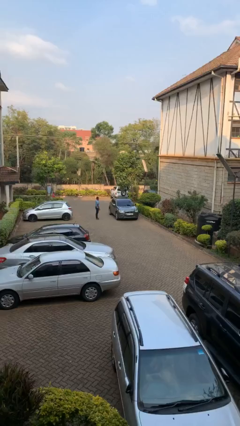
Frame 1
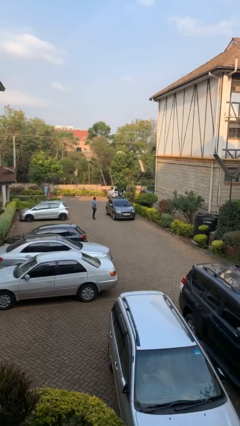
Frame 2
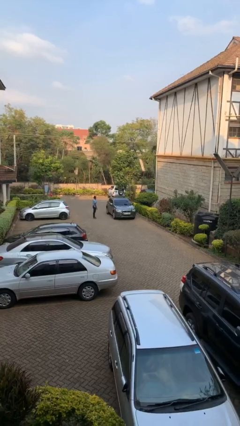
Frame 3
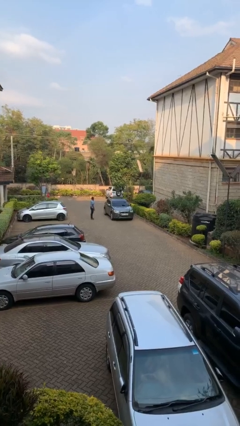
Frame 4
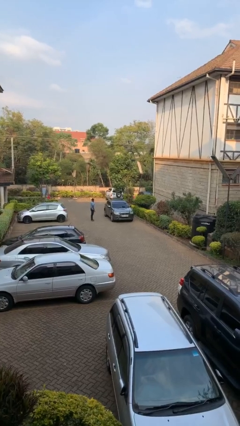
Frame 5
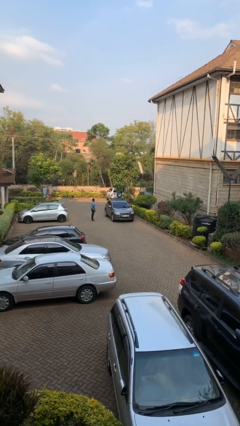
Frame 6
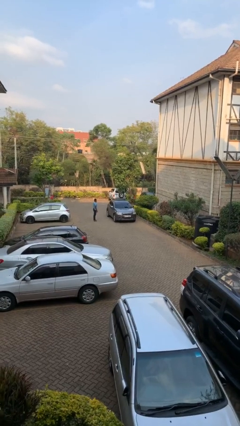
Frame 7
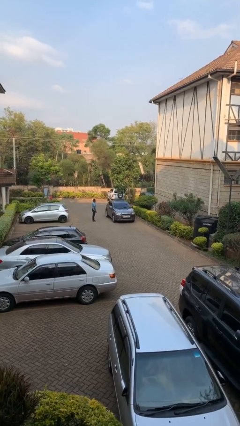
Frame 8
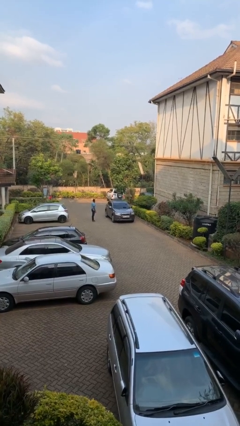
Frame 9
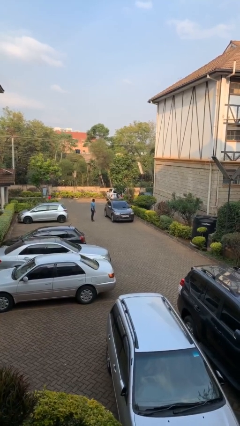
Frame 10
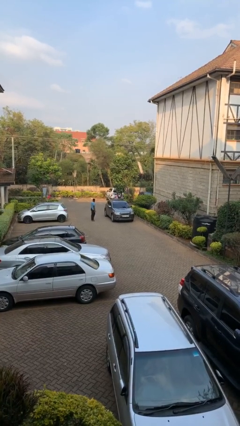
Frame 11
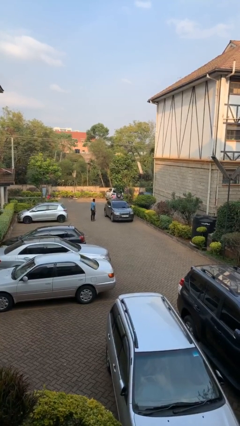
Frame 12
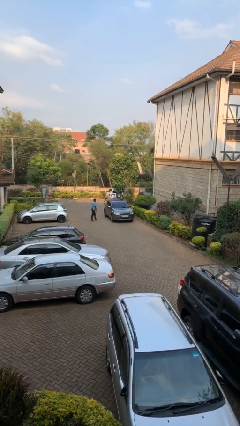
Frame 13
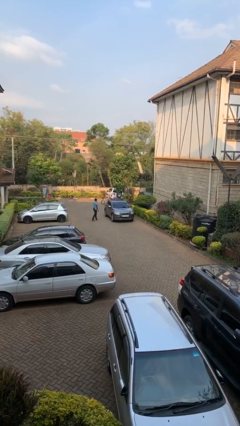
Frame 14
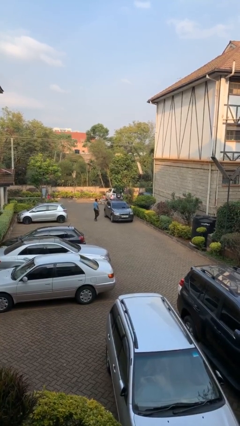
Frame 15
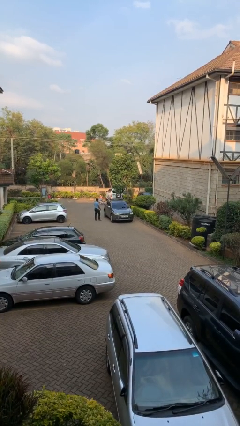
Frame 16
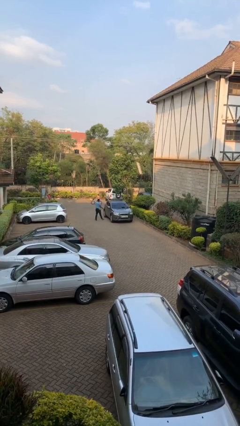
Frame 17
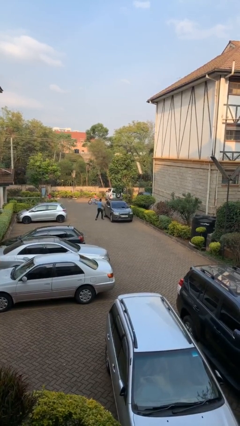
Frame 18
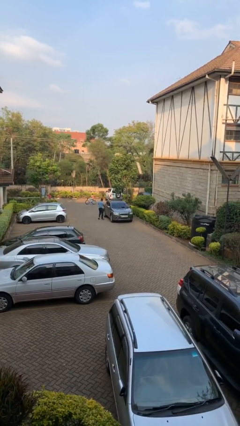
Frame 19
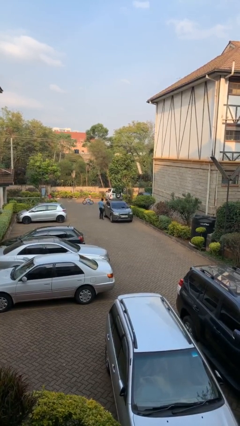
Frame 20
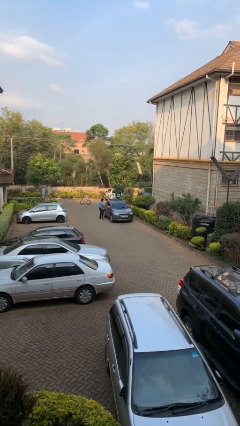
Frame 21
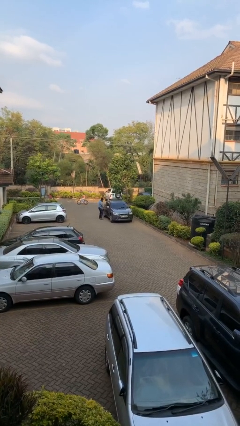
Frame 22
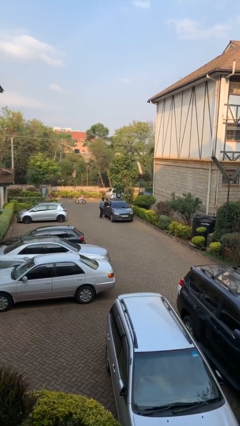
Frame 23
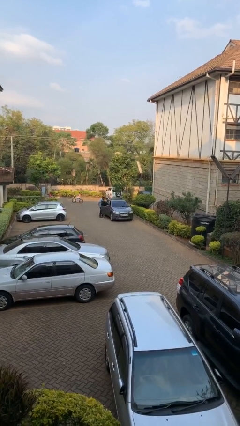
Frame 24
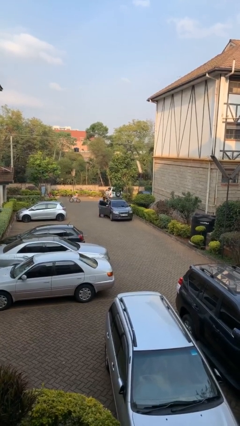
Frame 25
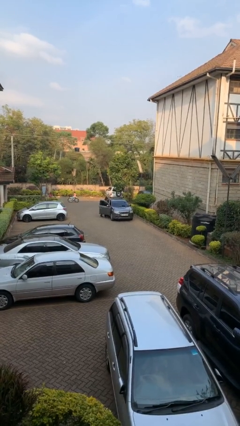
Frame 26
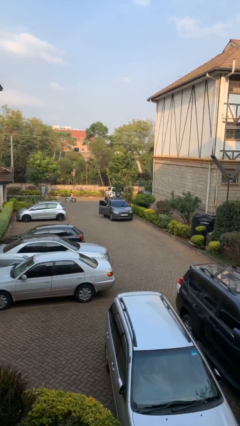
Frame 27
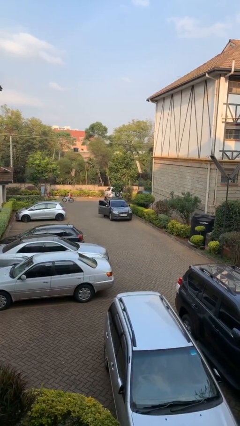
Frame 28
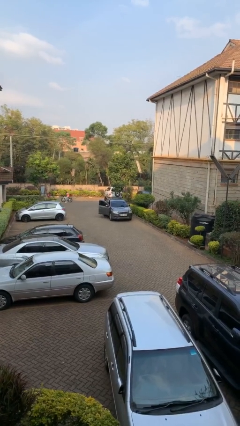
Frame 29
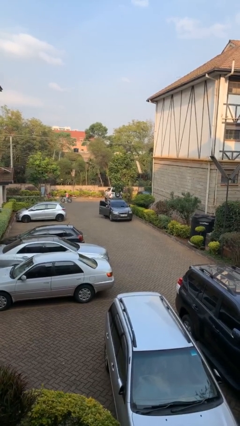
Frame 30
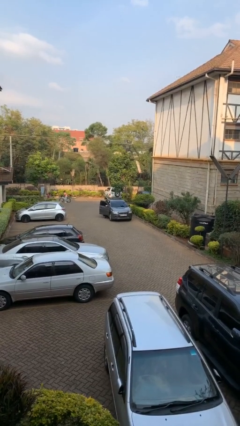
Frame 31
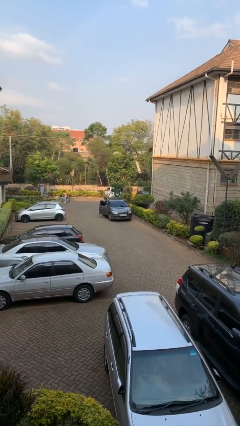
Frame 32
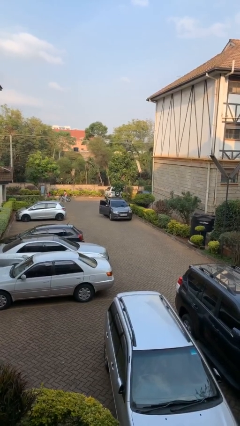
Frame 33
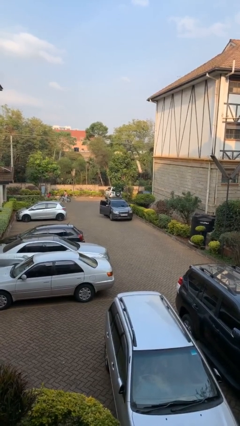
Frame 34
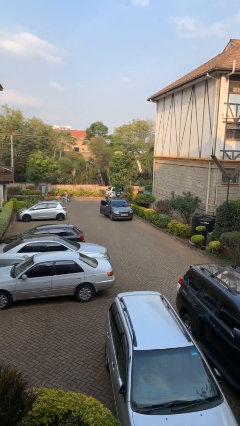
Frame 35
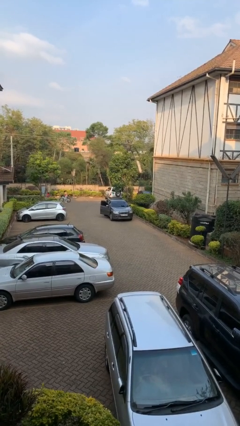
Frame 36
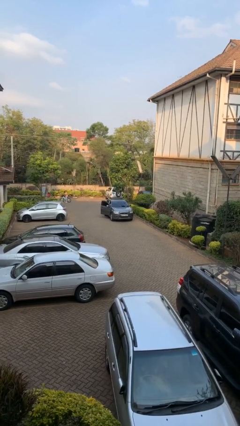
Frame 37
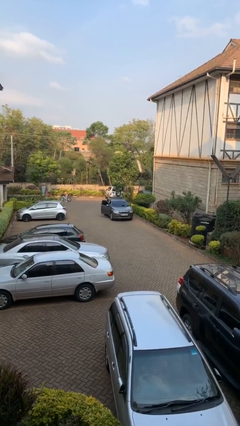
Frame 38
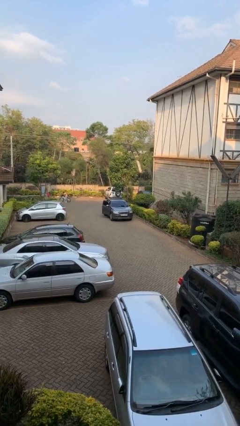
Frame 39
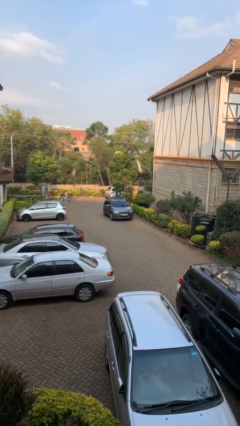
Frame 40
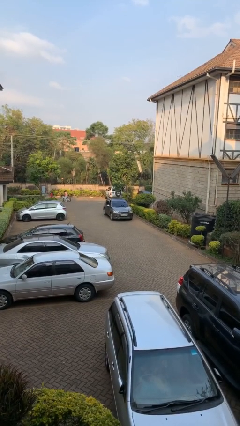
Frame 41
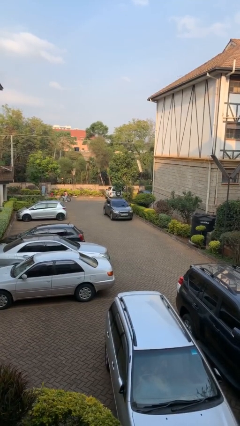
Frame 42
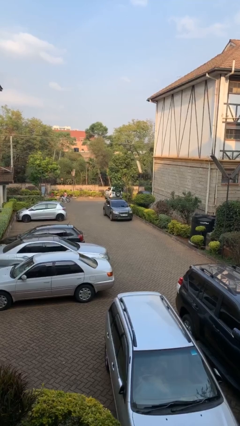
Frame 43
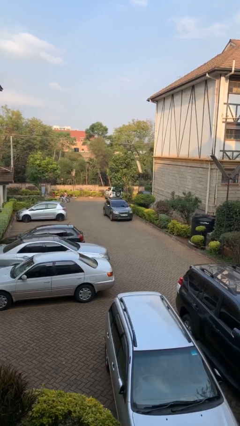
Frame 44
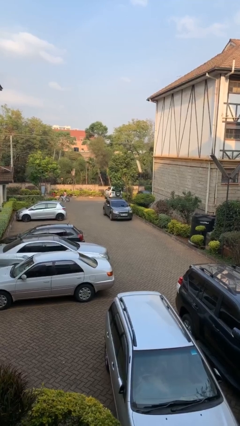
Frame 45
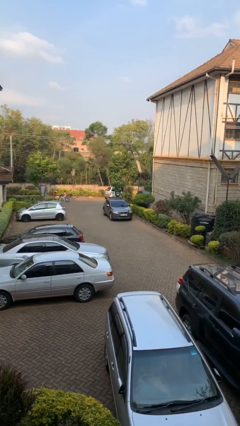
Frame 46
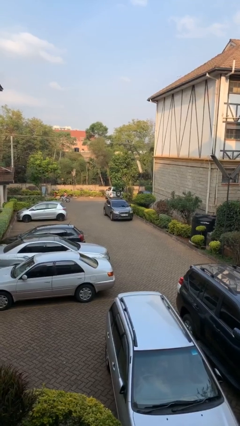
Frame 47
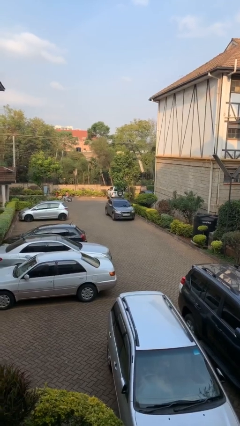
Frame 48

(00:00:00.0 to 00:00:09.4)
car picks up person

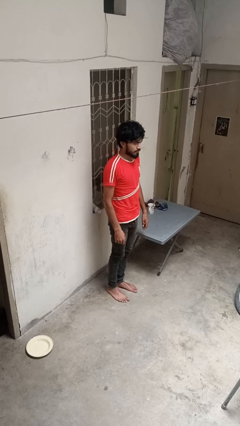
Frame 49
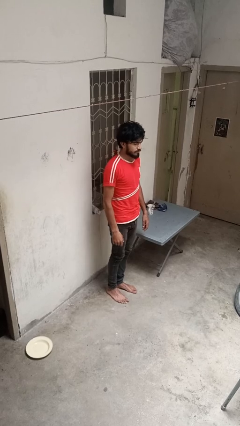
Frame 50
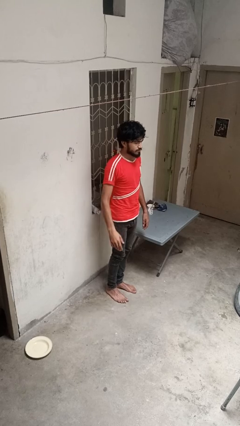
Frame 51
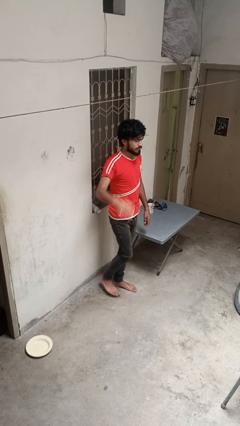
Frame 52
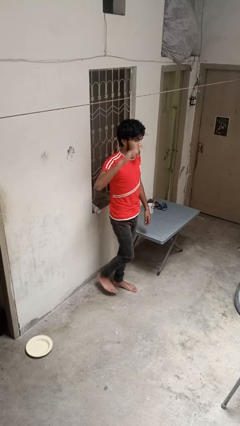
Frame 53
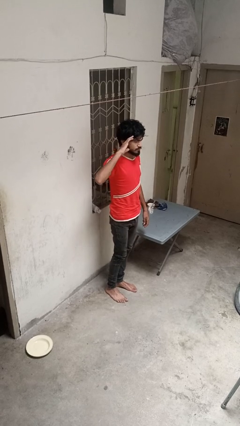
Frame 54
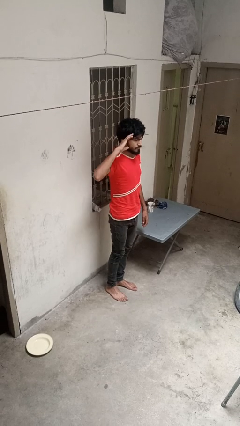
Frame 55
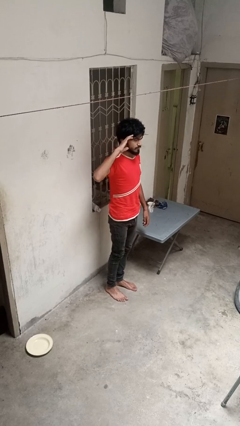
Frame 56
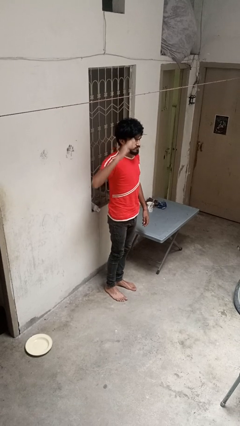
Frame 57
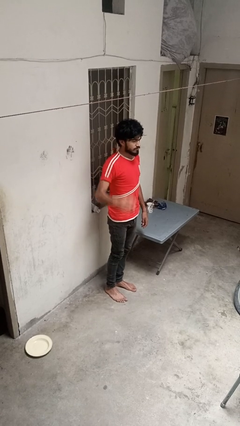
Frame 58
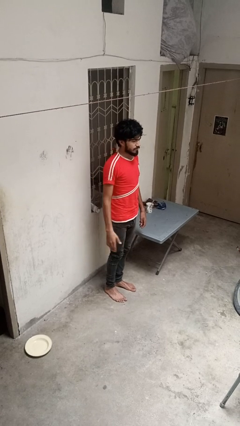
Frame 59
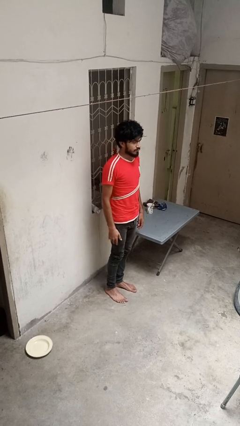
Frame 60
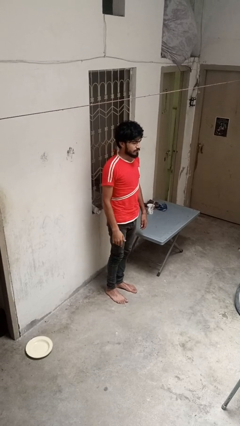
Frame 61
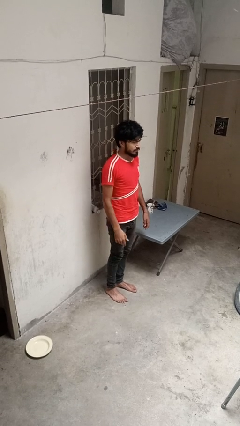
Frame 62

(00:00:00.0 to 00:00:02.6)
person salutes

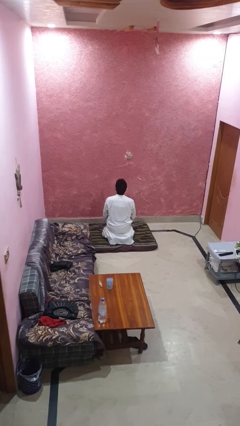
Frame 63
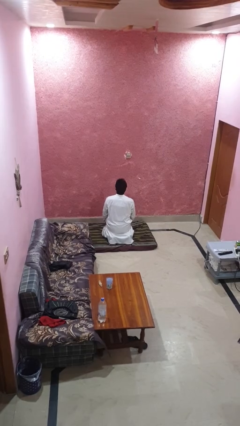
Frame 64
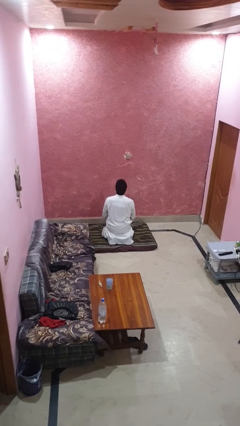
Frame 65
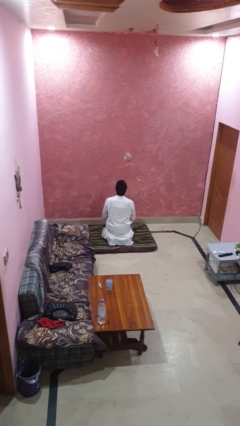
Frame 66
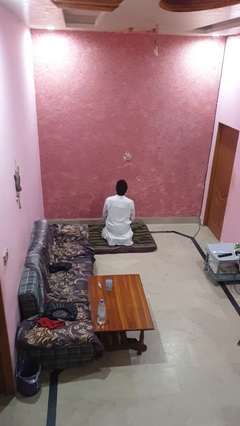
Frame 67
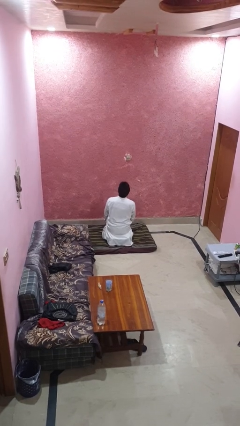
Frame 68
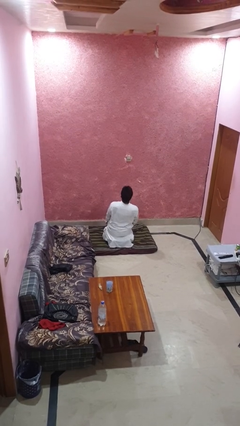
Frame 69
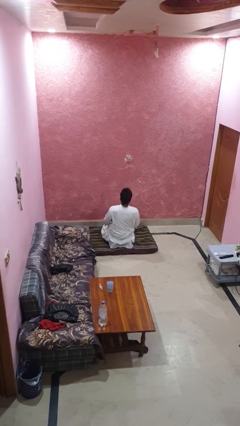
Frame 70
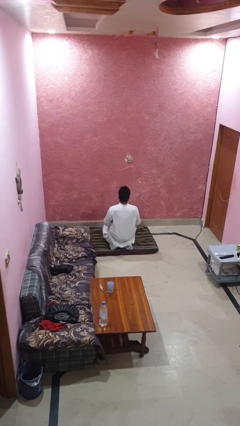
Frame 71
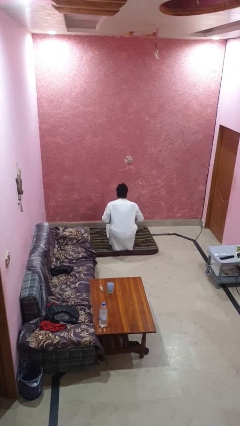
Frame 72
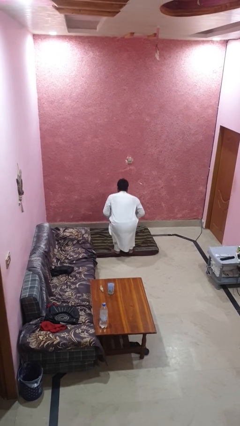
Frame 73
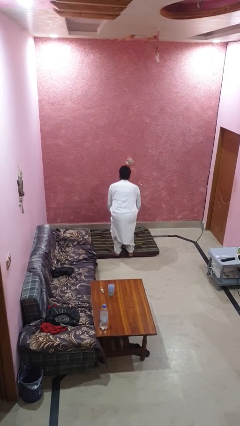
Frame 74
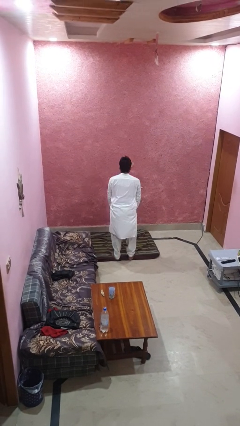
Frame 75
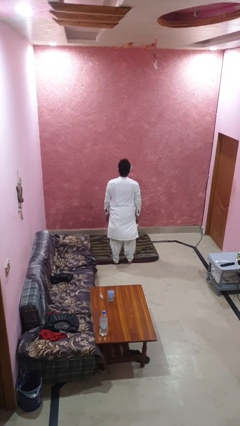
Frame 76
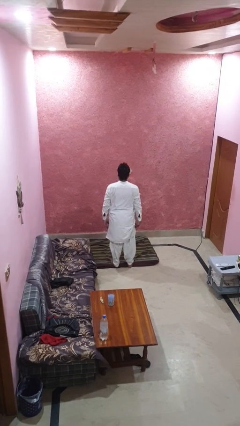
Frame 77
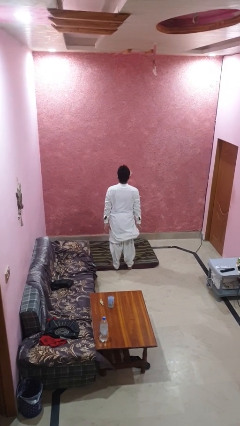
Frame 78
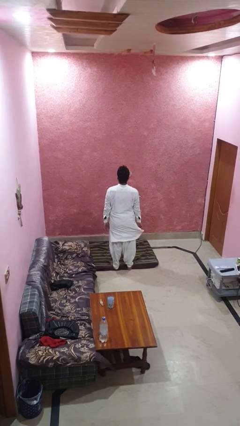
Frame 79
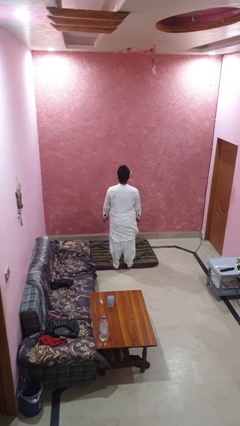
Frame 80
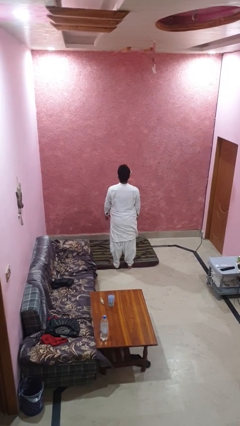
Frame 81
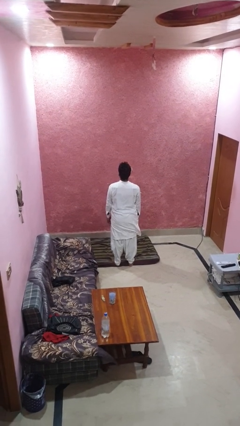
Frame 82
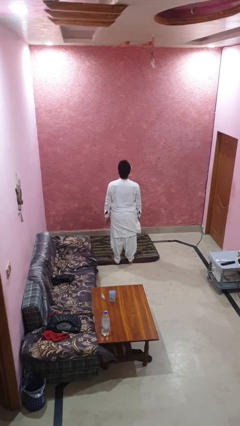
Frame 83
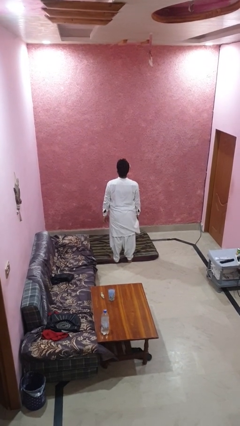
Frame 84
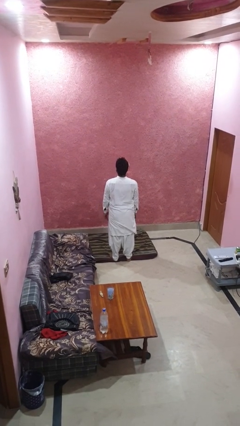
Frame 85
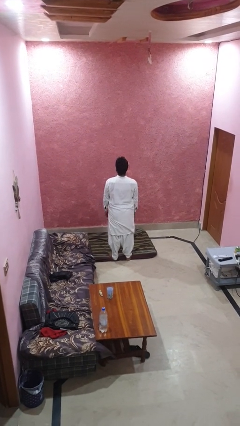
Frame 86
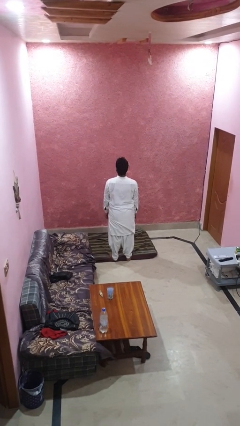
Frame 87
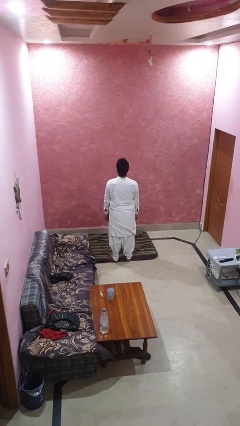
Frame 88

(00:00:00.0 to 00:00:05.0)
person stands up from floor

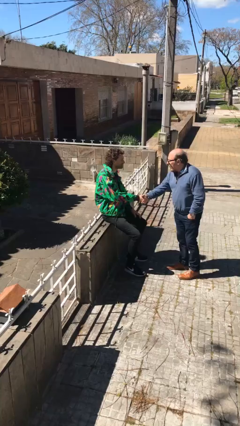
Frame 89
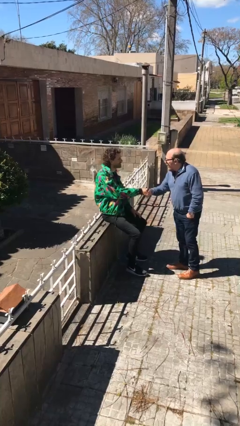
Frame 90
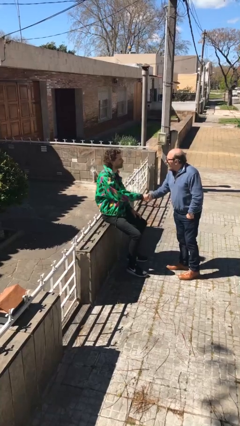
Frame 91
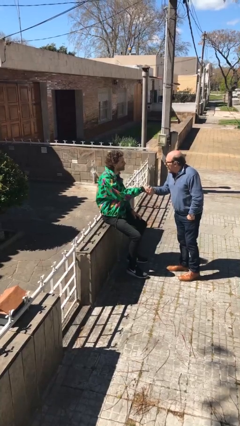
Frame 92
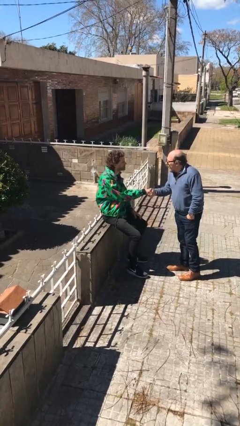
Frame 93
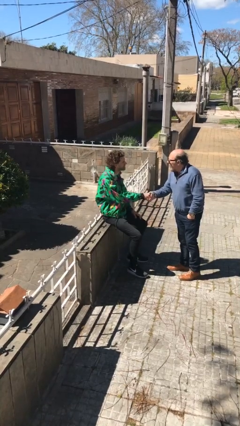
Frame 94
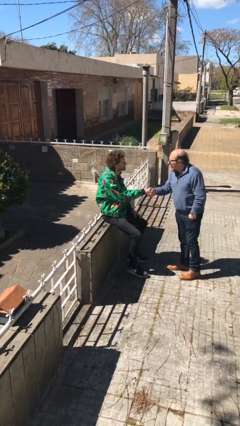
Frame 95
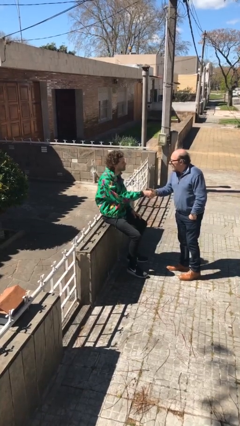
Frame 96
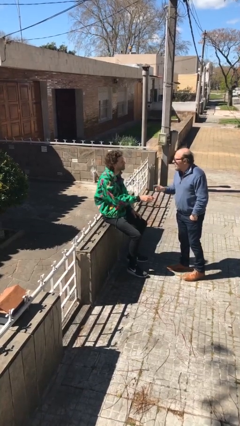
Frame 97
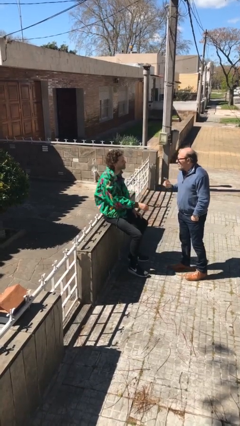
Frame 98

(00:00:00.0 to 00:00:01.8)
person shakes hand
